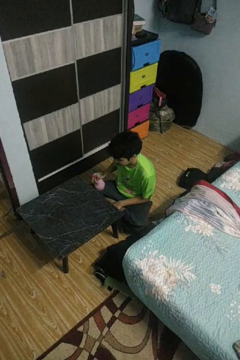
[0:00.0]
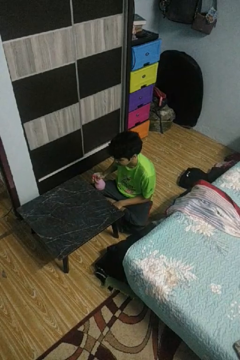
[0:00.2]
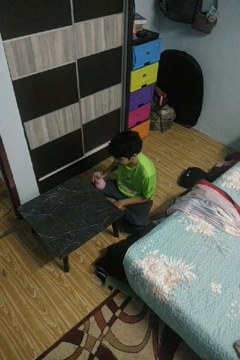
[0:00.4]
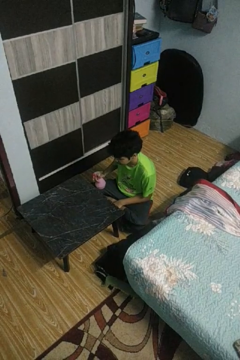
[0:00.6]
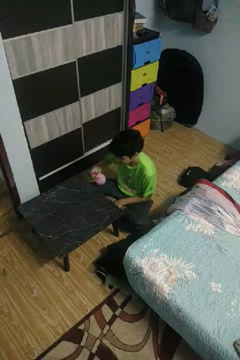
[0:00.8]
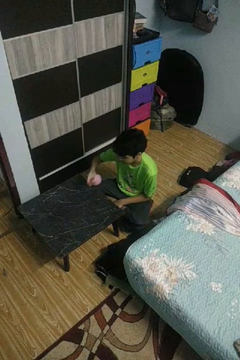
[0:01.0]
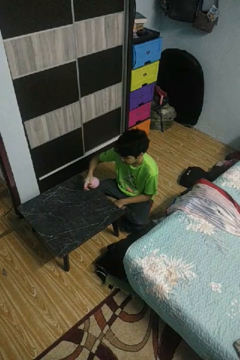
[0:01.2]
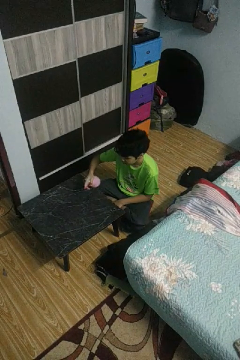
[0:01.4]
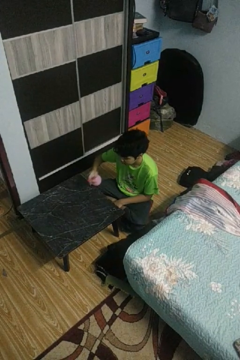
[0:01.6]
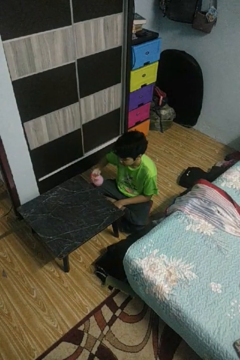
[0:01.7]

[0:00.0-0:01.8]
person sprays from bottle

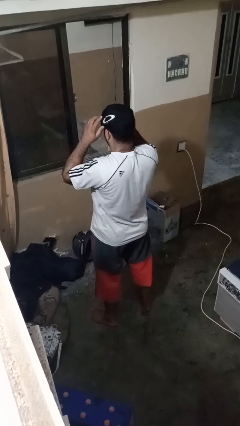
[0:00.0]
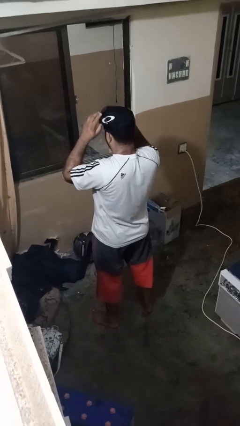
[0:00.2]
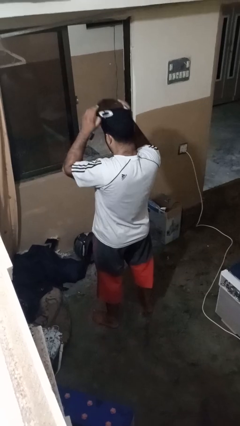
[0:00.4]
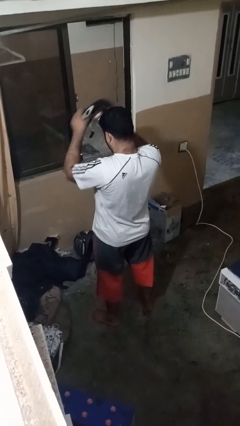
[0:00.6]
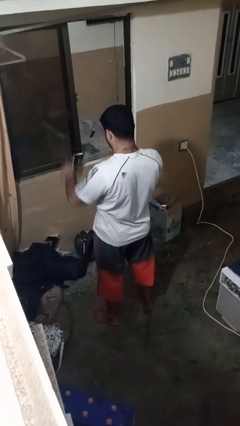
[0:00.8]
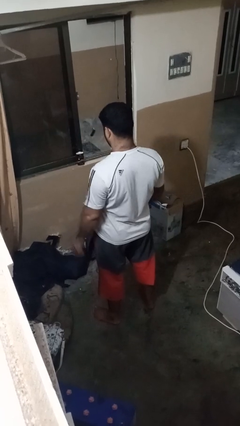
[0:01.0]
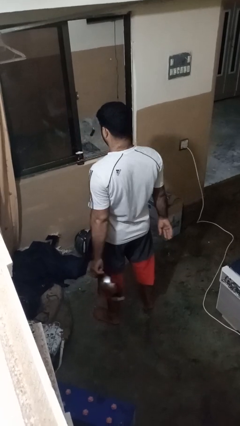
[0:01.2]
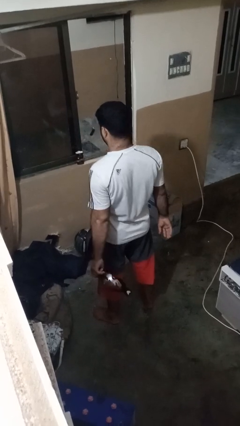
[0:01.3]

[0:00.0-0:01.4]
person takes off sunglasses

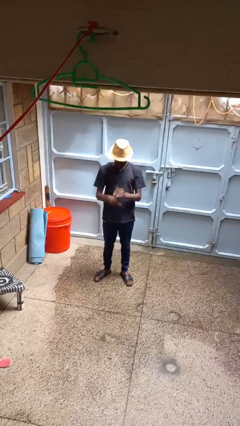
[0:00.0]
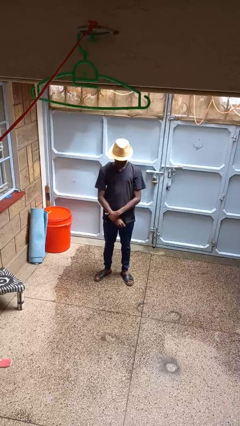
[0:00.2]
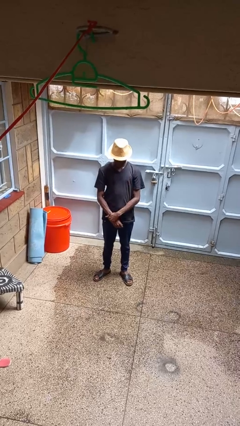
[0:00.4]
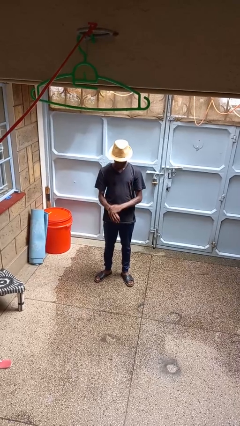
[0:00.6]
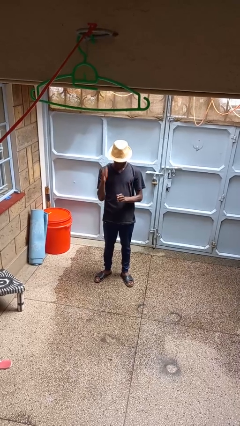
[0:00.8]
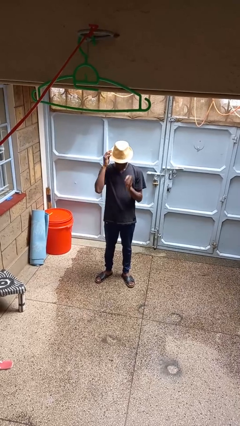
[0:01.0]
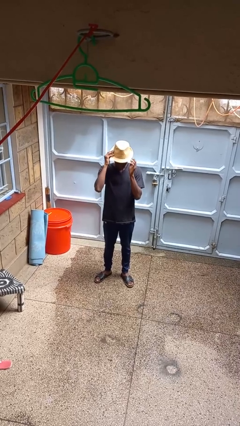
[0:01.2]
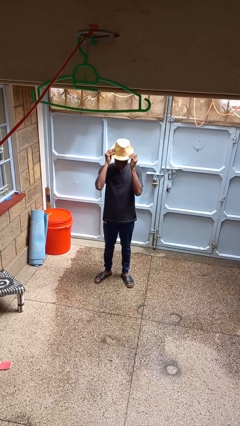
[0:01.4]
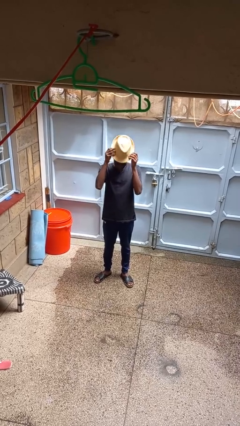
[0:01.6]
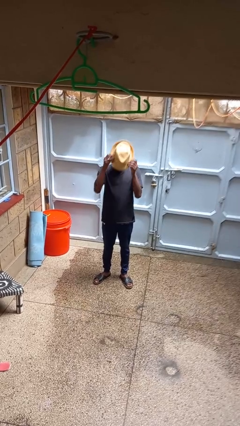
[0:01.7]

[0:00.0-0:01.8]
person takes off hat

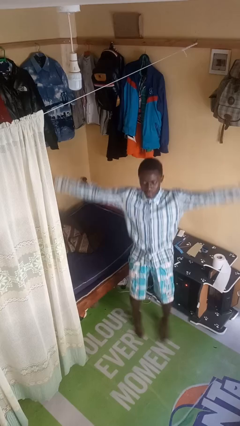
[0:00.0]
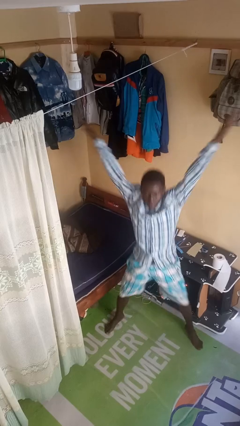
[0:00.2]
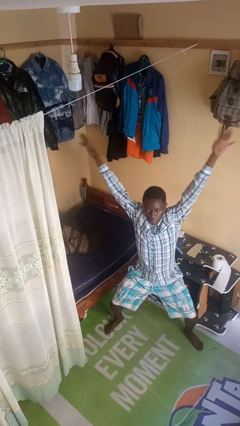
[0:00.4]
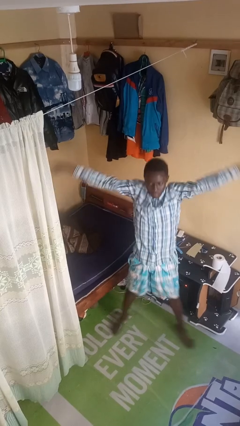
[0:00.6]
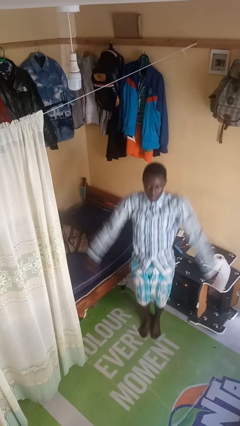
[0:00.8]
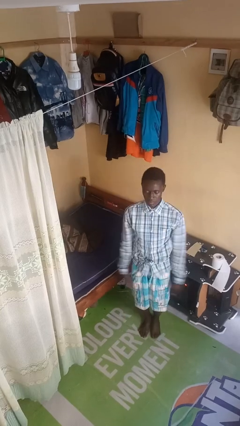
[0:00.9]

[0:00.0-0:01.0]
person exercises with jumping jacks

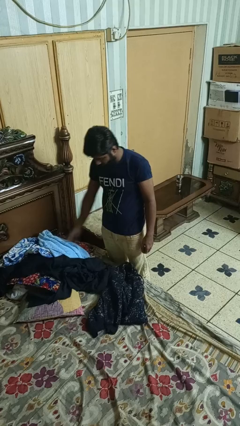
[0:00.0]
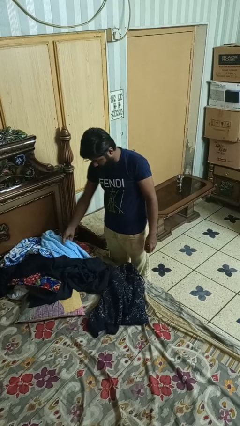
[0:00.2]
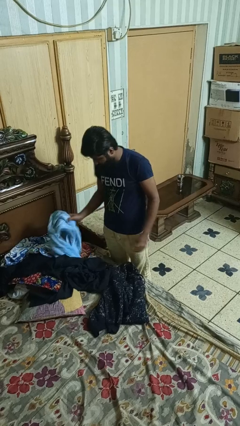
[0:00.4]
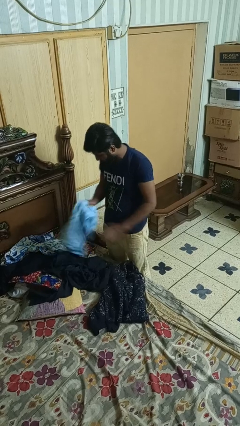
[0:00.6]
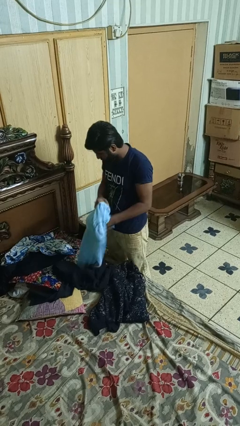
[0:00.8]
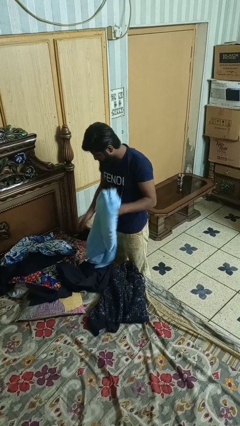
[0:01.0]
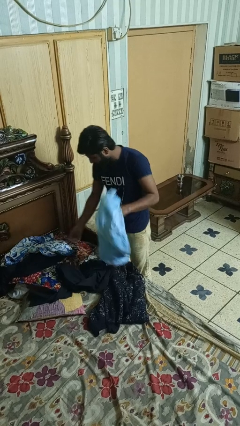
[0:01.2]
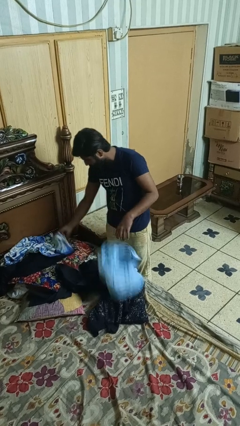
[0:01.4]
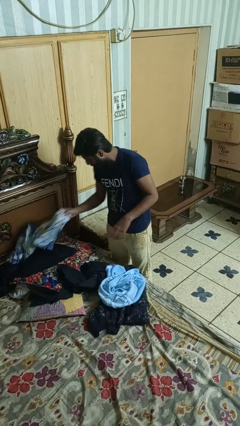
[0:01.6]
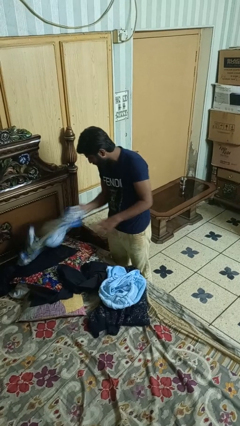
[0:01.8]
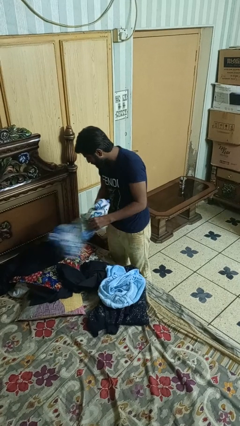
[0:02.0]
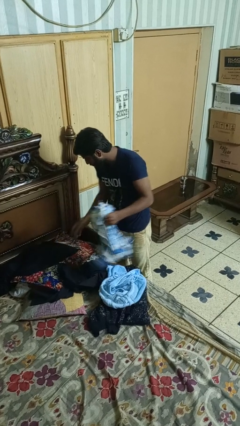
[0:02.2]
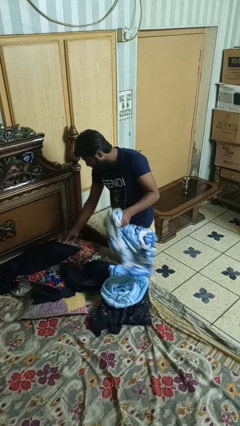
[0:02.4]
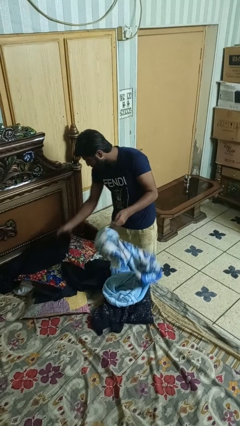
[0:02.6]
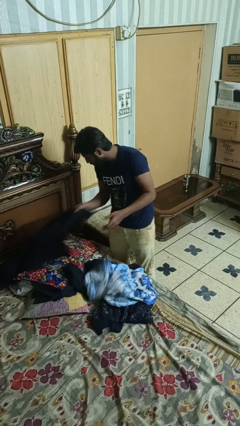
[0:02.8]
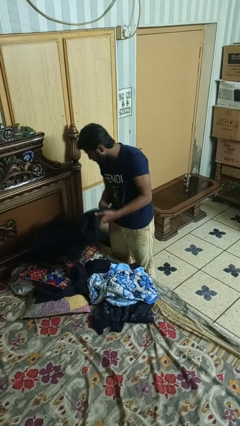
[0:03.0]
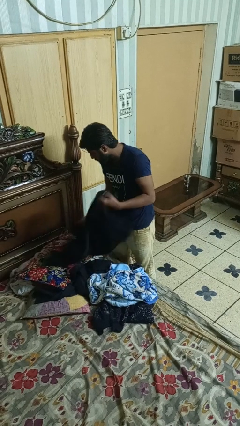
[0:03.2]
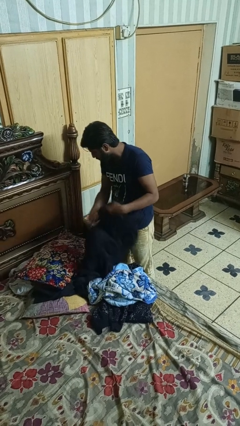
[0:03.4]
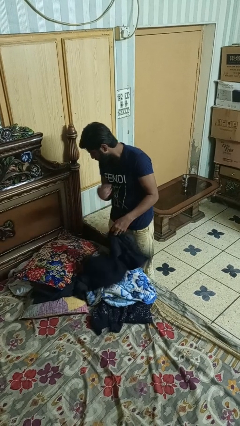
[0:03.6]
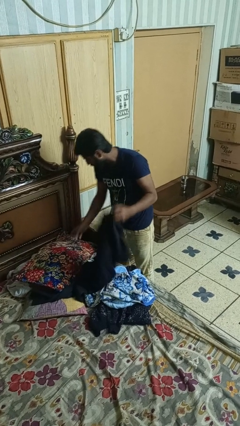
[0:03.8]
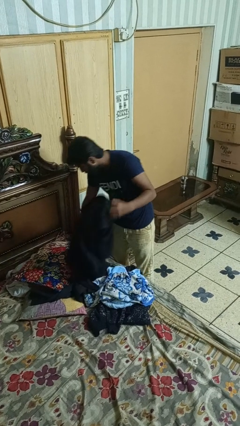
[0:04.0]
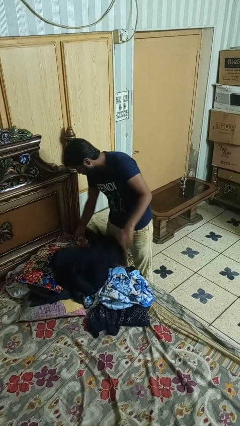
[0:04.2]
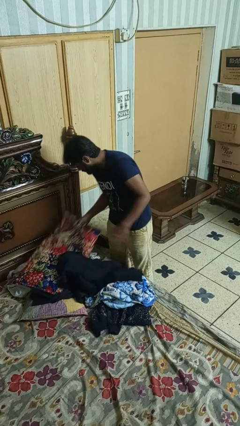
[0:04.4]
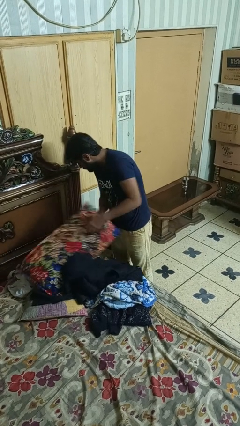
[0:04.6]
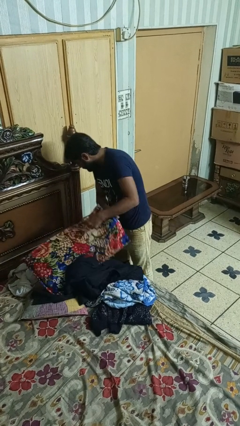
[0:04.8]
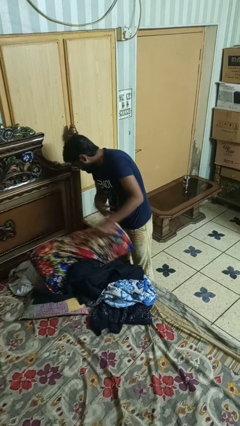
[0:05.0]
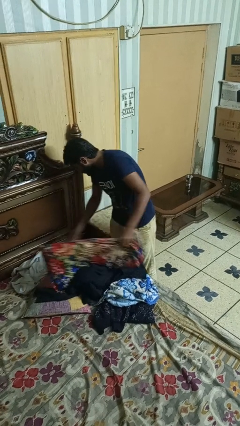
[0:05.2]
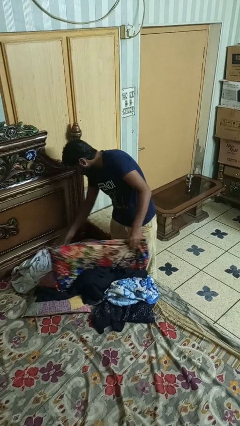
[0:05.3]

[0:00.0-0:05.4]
person searches under bed

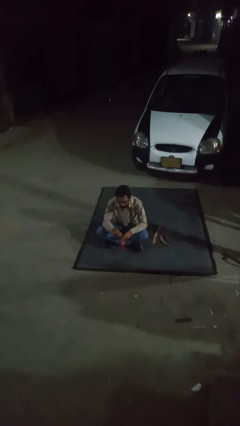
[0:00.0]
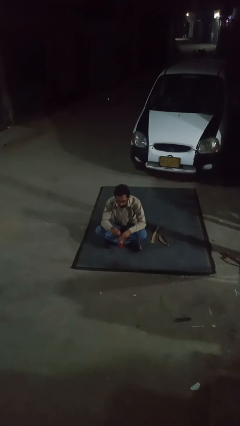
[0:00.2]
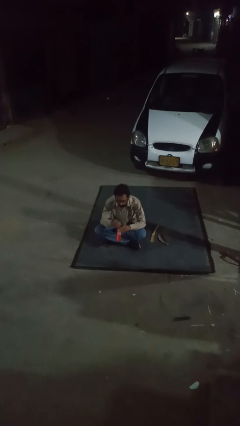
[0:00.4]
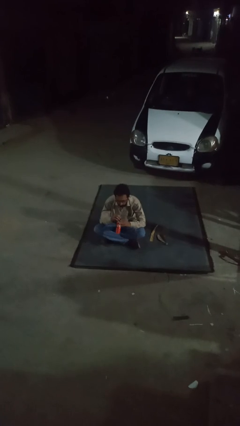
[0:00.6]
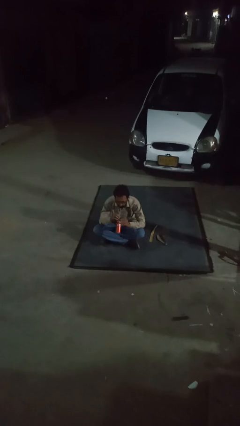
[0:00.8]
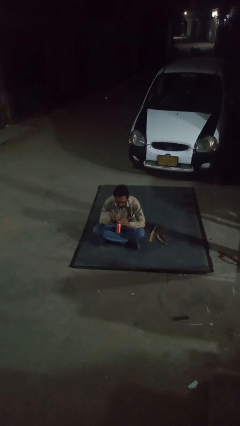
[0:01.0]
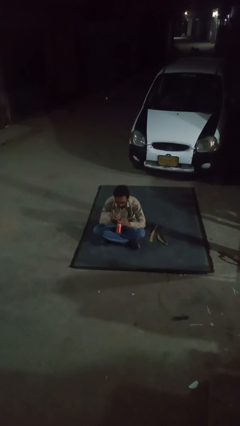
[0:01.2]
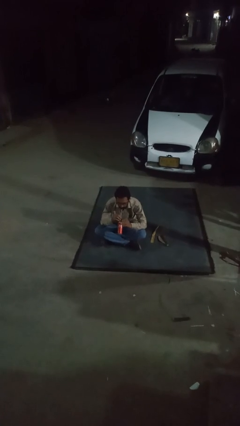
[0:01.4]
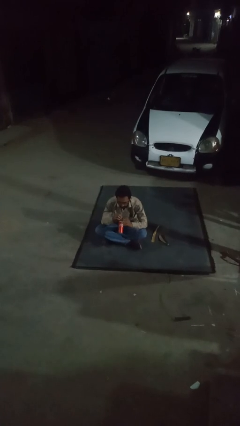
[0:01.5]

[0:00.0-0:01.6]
person drinks from straw

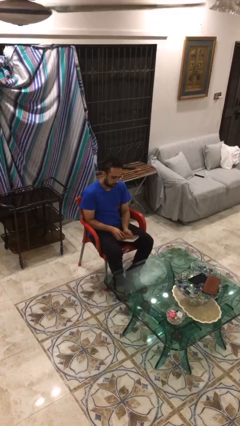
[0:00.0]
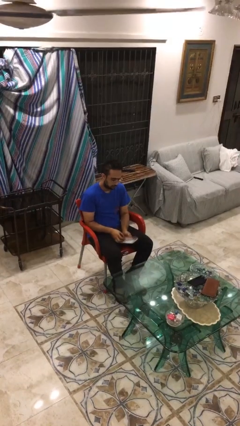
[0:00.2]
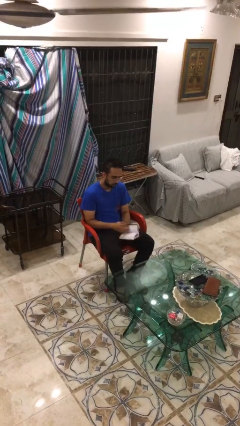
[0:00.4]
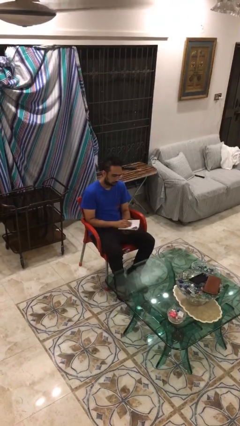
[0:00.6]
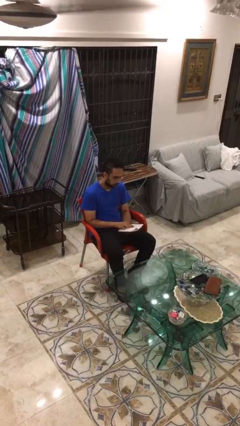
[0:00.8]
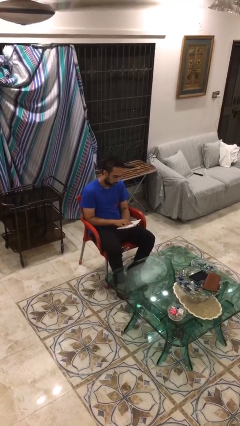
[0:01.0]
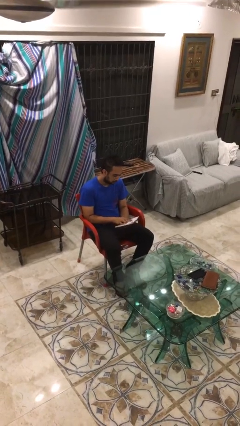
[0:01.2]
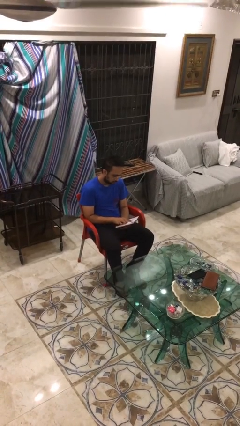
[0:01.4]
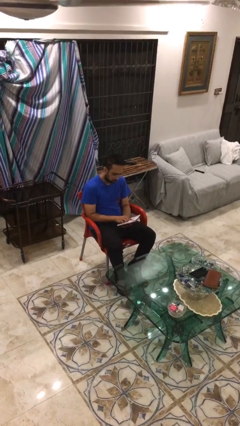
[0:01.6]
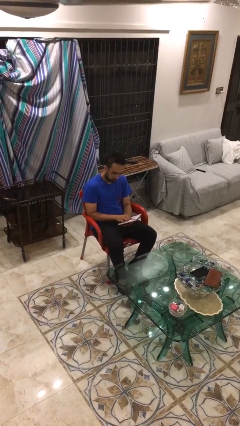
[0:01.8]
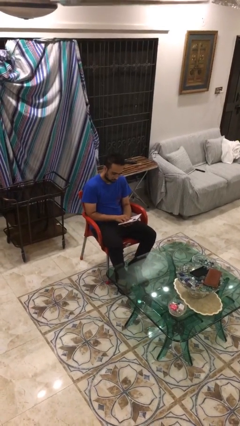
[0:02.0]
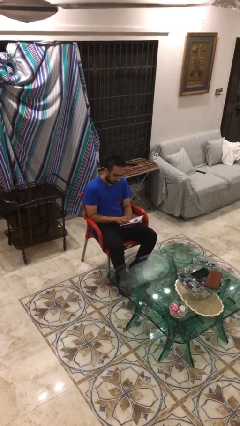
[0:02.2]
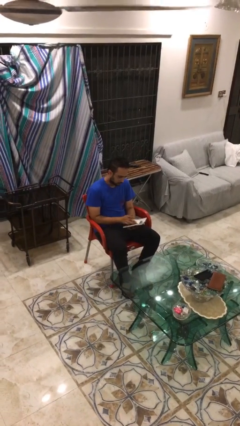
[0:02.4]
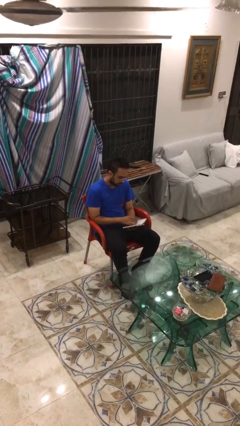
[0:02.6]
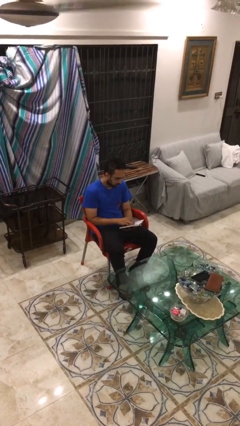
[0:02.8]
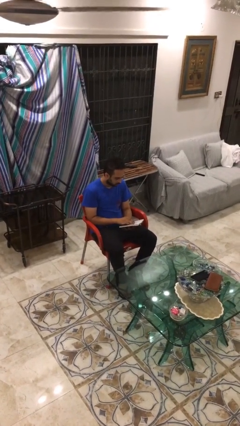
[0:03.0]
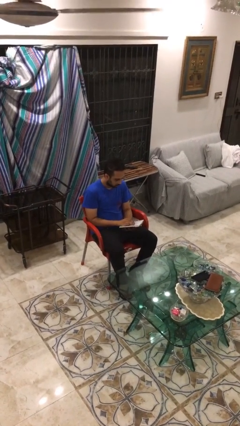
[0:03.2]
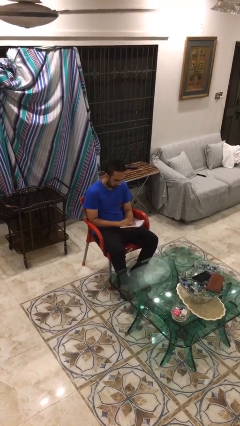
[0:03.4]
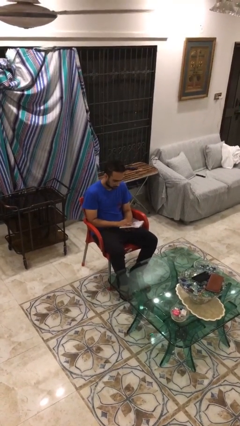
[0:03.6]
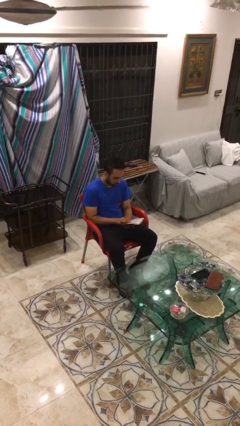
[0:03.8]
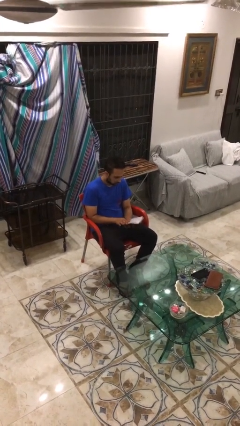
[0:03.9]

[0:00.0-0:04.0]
person reads document

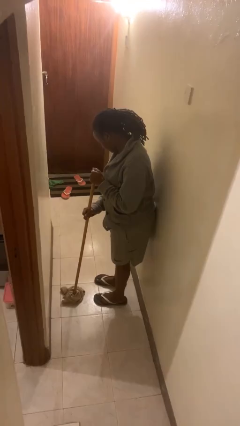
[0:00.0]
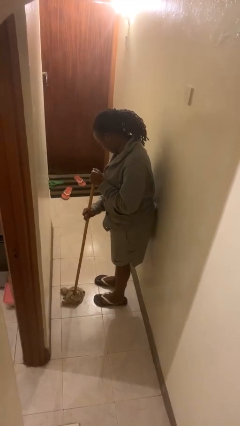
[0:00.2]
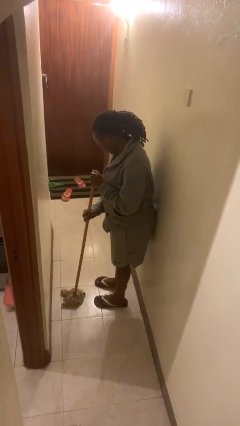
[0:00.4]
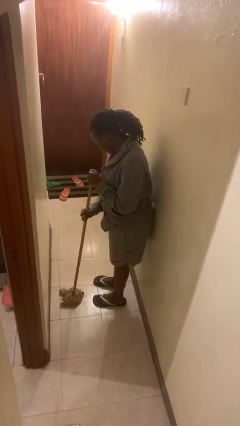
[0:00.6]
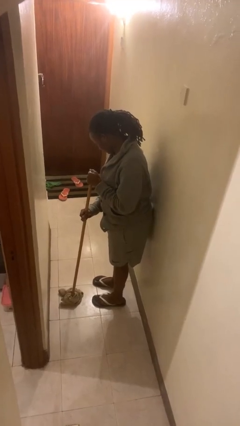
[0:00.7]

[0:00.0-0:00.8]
person mops
